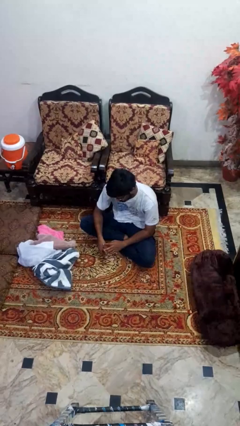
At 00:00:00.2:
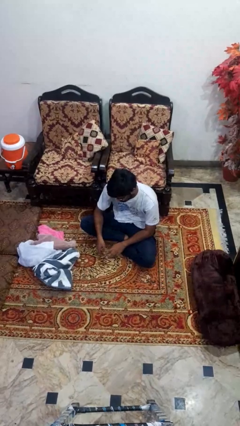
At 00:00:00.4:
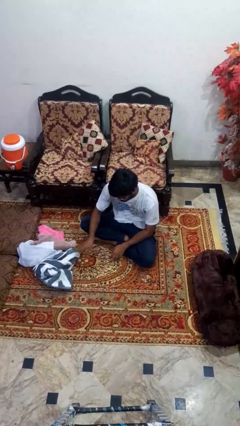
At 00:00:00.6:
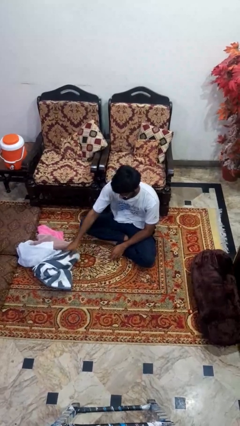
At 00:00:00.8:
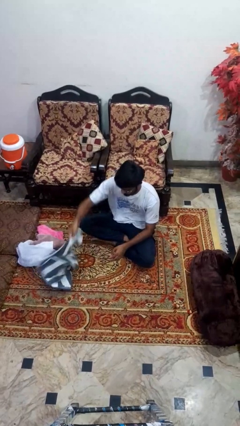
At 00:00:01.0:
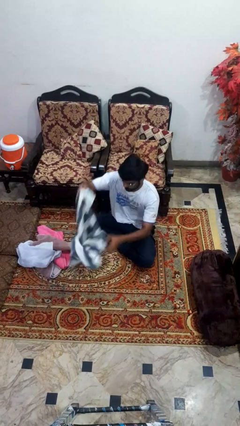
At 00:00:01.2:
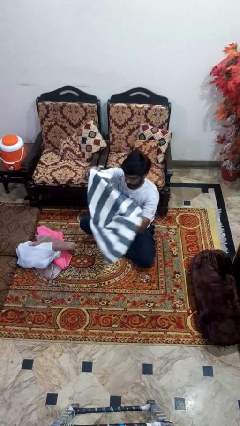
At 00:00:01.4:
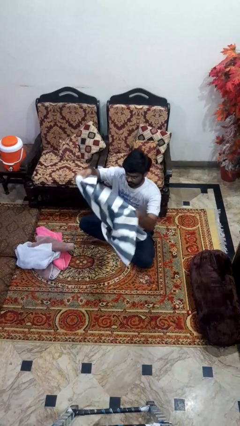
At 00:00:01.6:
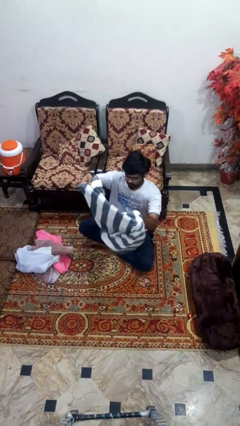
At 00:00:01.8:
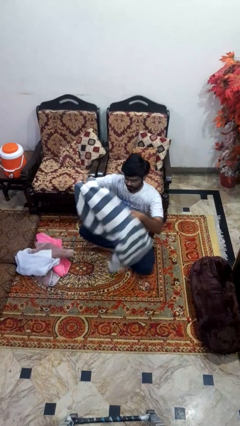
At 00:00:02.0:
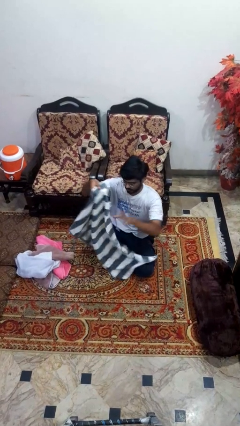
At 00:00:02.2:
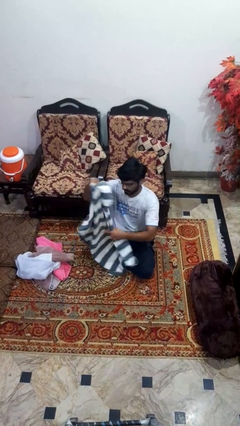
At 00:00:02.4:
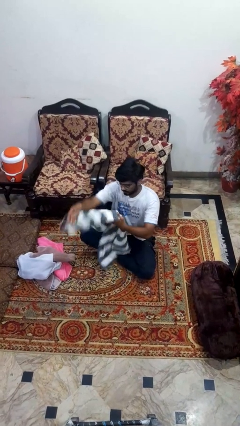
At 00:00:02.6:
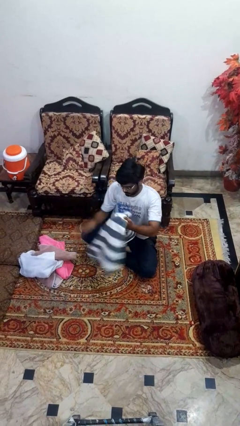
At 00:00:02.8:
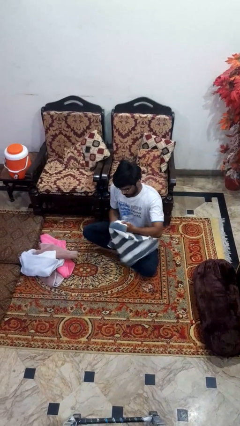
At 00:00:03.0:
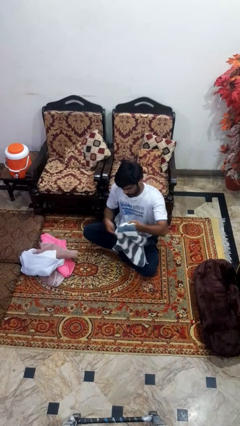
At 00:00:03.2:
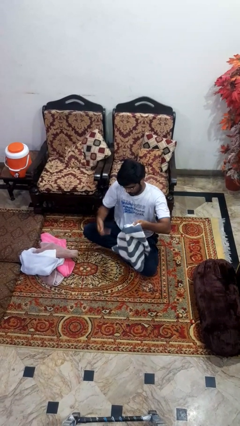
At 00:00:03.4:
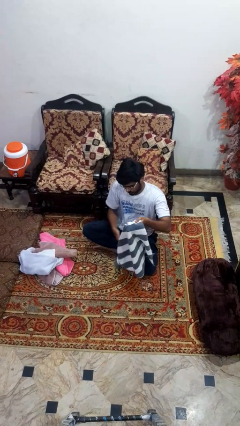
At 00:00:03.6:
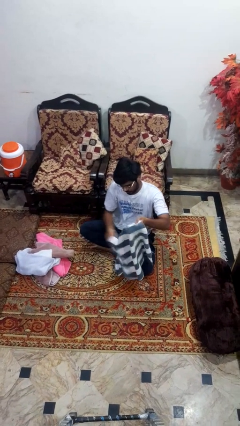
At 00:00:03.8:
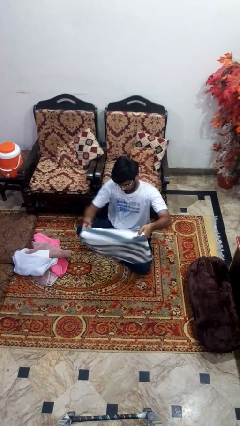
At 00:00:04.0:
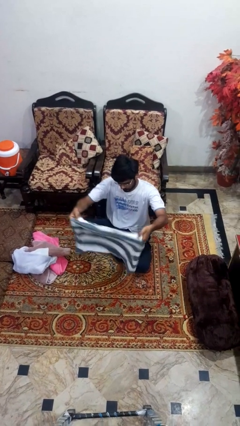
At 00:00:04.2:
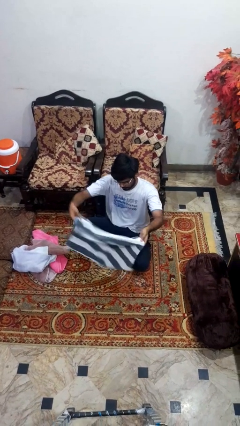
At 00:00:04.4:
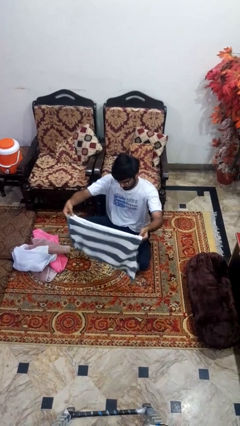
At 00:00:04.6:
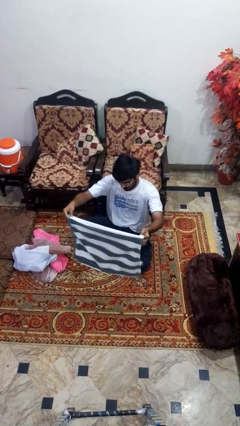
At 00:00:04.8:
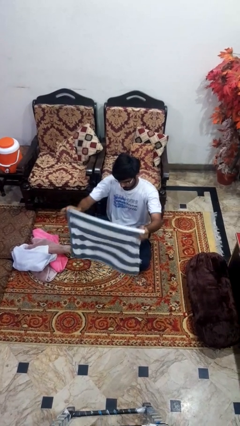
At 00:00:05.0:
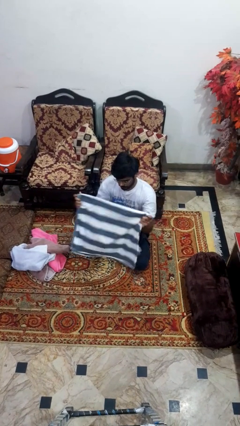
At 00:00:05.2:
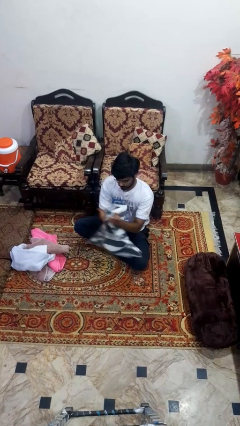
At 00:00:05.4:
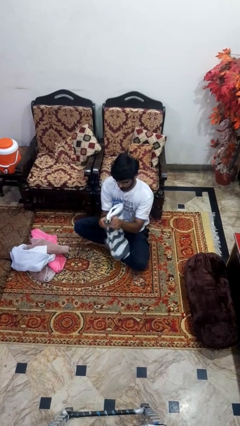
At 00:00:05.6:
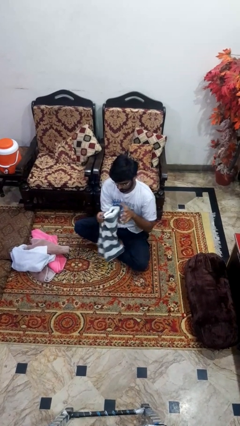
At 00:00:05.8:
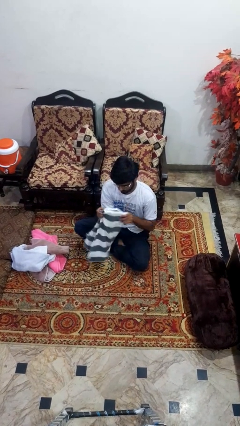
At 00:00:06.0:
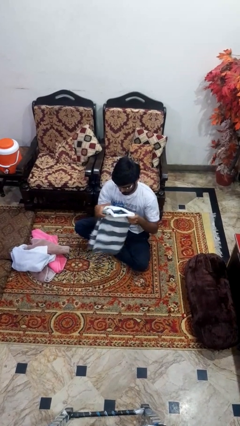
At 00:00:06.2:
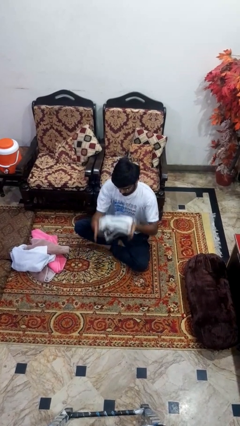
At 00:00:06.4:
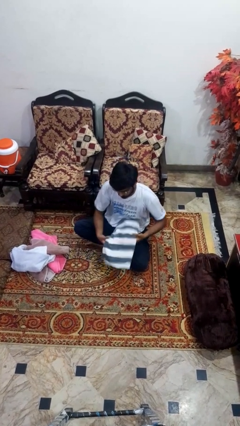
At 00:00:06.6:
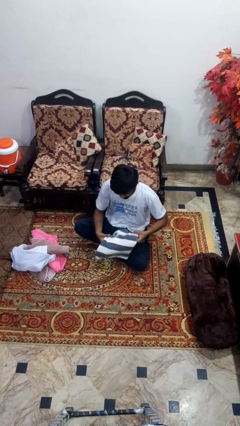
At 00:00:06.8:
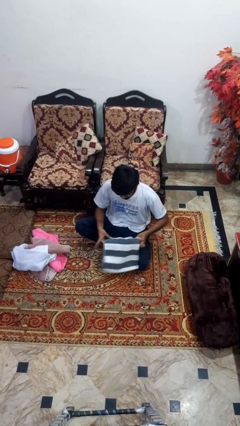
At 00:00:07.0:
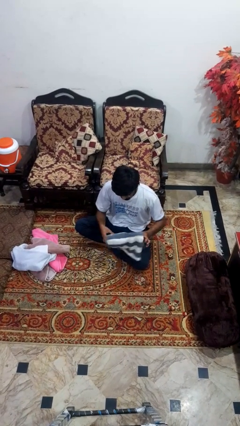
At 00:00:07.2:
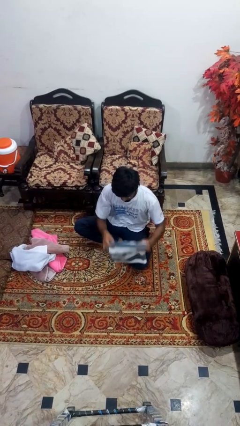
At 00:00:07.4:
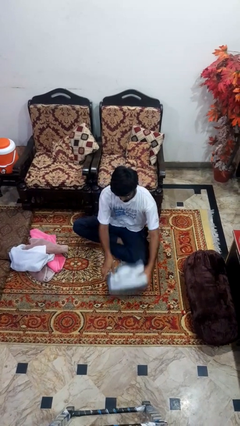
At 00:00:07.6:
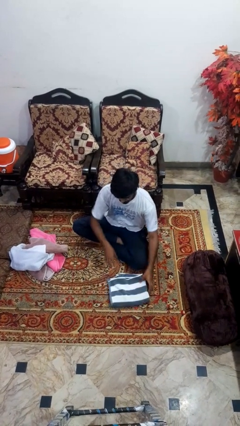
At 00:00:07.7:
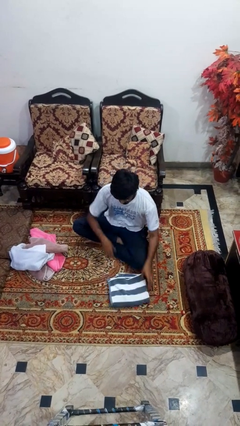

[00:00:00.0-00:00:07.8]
person folds towel

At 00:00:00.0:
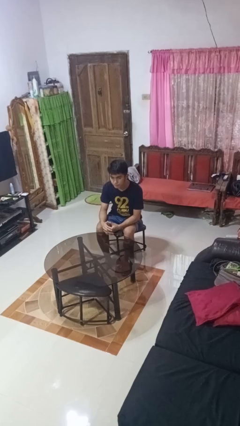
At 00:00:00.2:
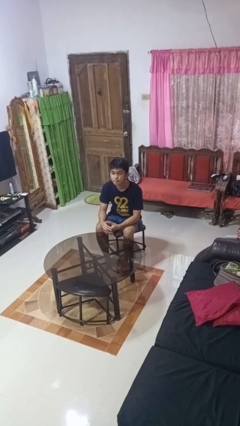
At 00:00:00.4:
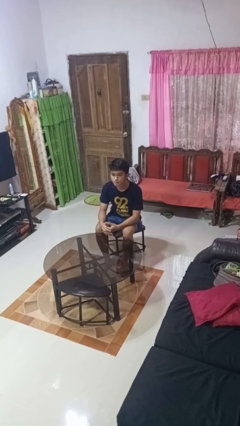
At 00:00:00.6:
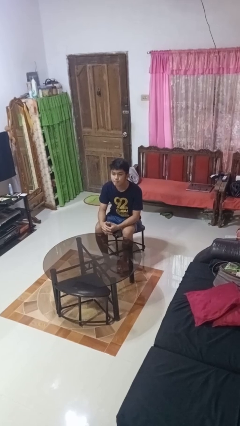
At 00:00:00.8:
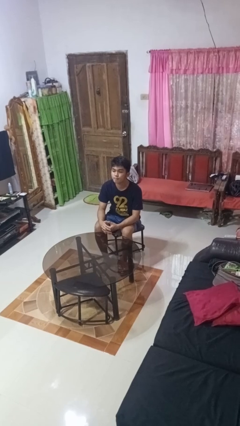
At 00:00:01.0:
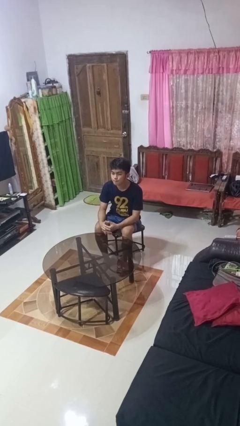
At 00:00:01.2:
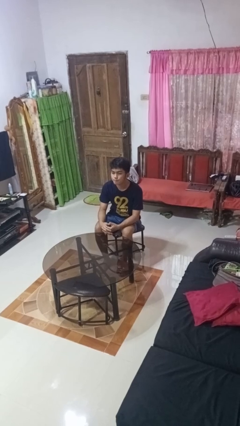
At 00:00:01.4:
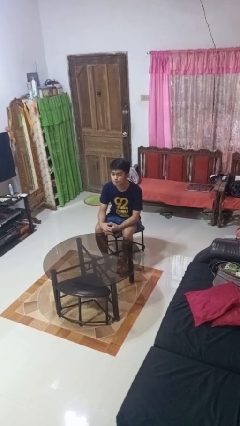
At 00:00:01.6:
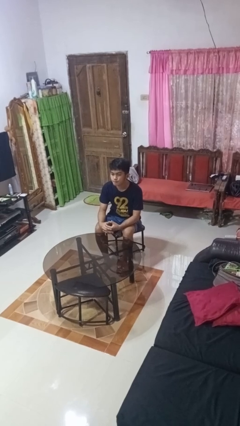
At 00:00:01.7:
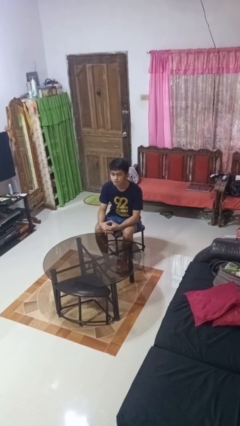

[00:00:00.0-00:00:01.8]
person nods head

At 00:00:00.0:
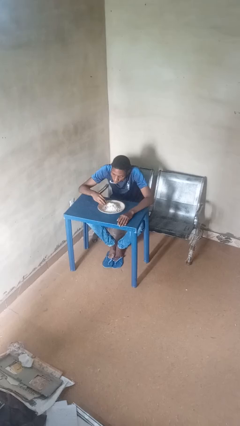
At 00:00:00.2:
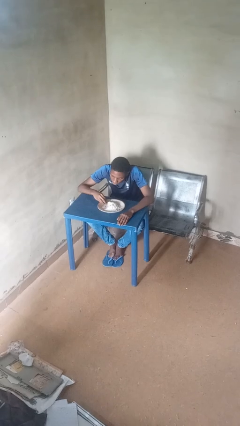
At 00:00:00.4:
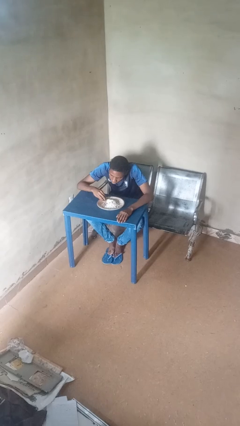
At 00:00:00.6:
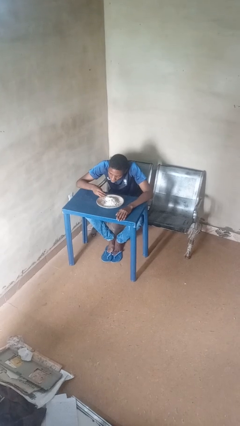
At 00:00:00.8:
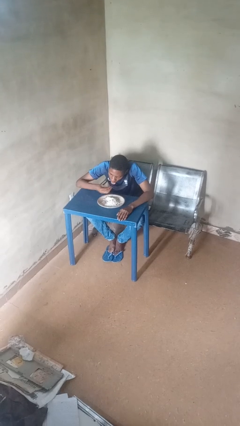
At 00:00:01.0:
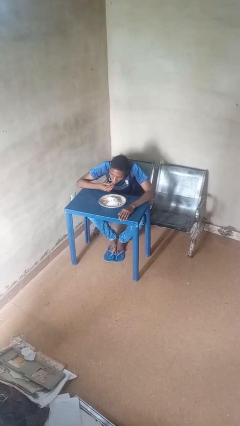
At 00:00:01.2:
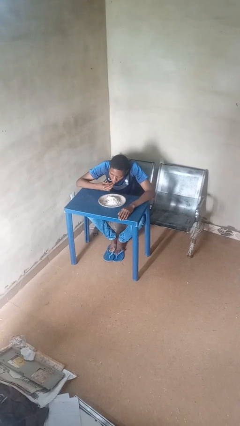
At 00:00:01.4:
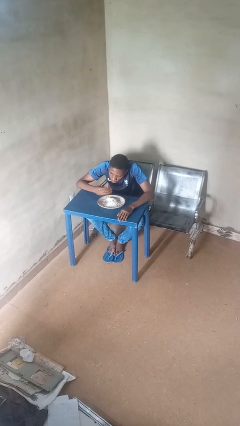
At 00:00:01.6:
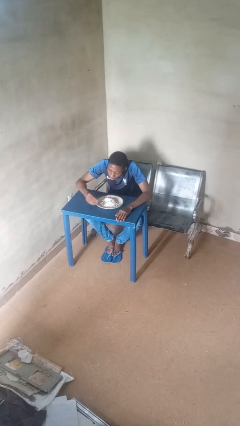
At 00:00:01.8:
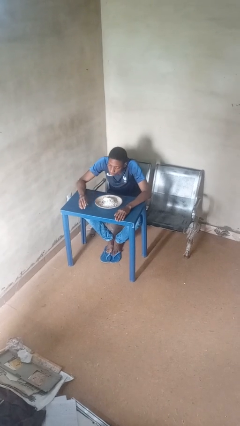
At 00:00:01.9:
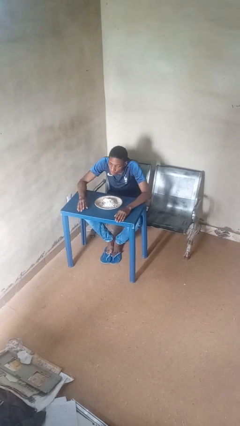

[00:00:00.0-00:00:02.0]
person eats with hands

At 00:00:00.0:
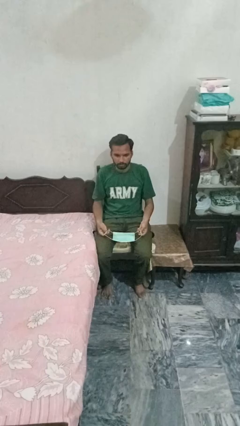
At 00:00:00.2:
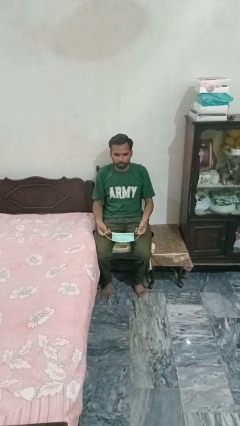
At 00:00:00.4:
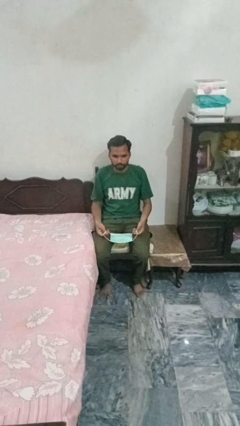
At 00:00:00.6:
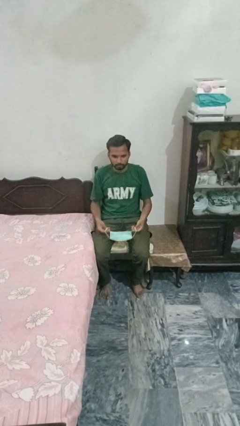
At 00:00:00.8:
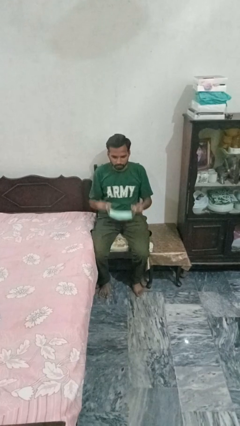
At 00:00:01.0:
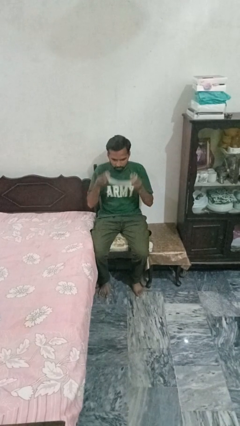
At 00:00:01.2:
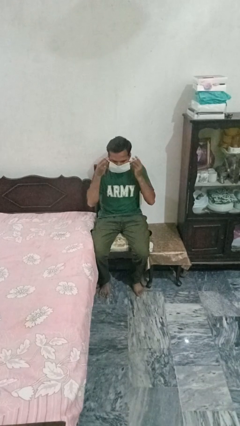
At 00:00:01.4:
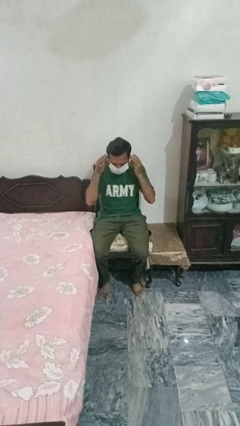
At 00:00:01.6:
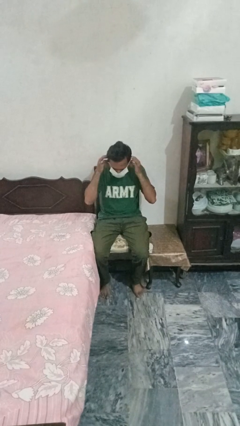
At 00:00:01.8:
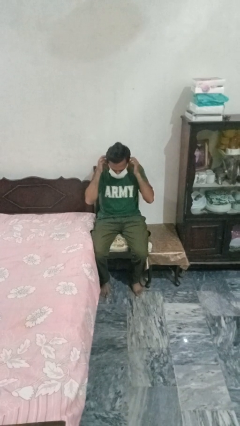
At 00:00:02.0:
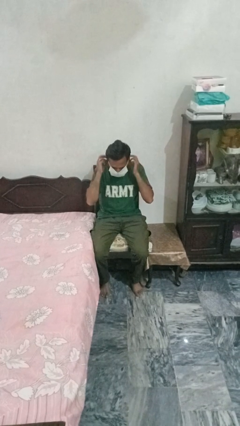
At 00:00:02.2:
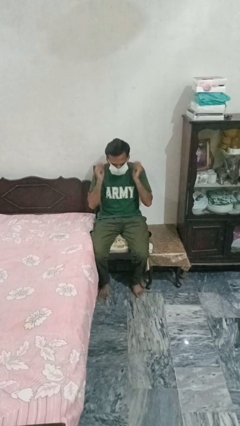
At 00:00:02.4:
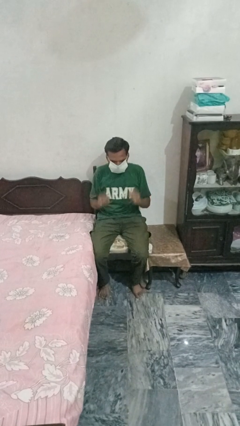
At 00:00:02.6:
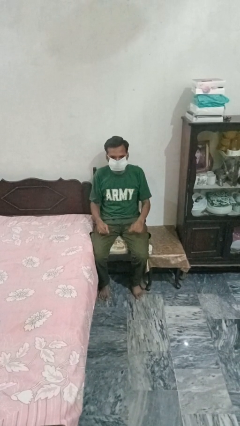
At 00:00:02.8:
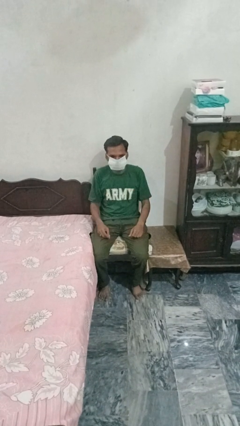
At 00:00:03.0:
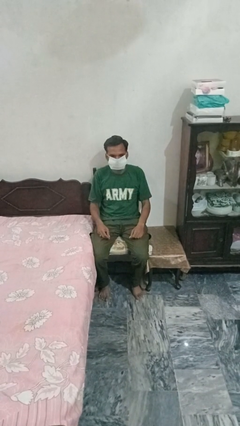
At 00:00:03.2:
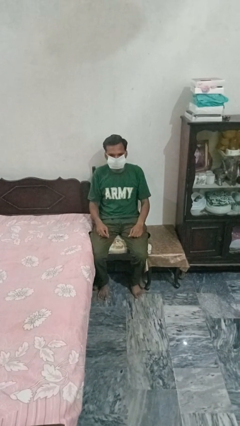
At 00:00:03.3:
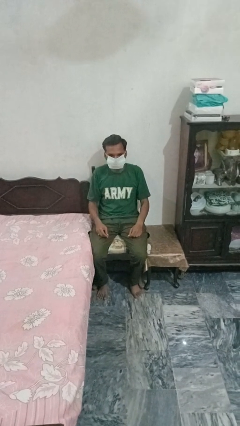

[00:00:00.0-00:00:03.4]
person puts on facemask

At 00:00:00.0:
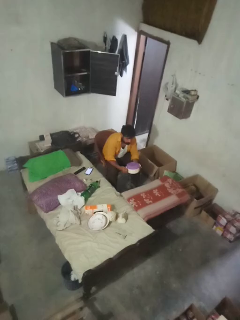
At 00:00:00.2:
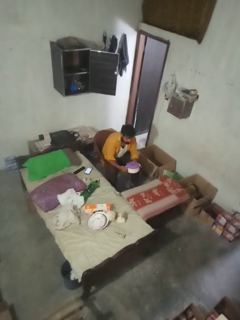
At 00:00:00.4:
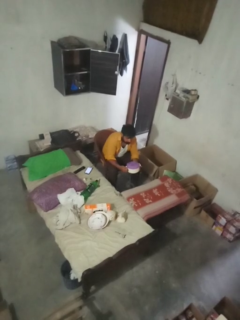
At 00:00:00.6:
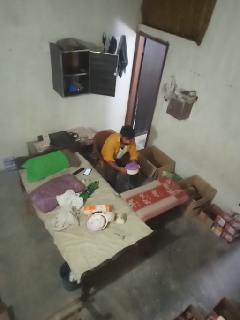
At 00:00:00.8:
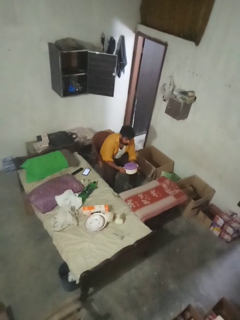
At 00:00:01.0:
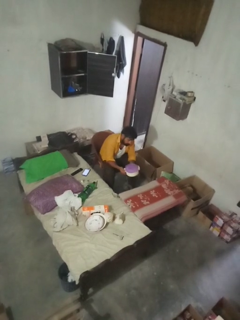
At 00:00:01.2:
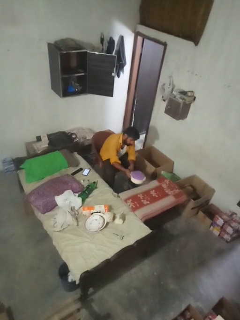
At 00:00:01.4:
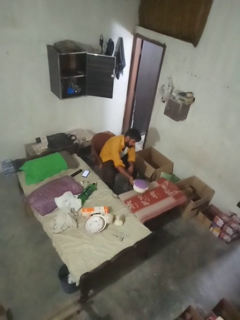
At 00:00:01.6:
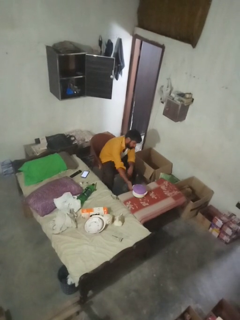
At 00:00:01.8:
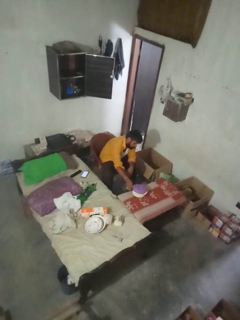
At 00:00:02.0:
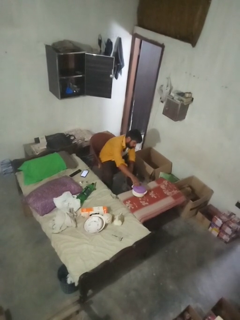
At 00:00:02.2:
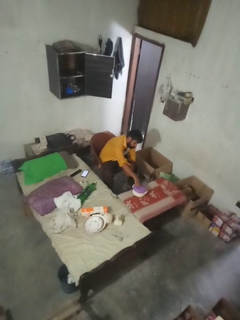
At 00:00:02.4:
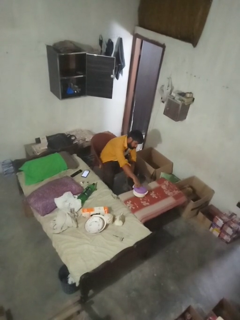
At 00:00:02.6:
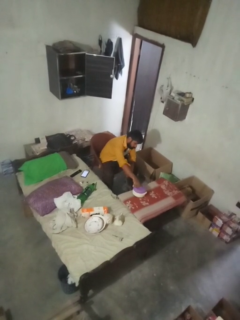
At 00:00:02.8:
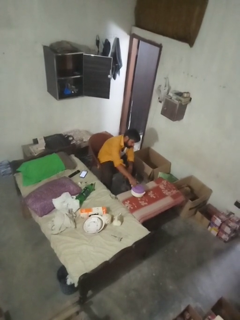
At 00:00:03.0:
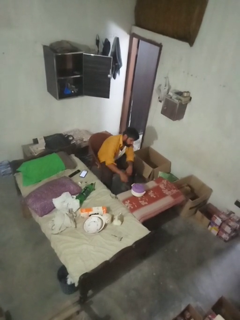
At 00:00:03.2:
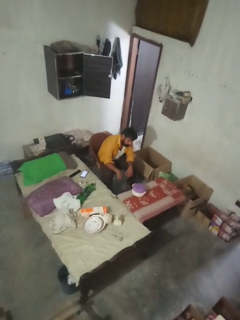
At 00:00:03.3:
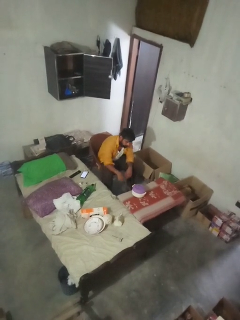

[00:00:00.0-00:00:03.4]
person takes off apron

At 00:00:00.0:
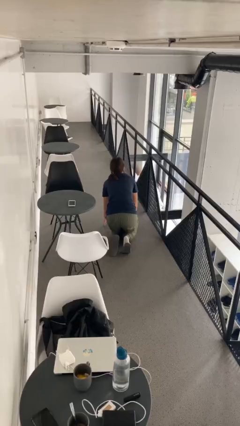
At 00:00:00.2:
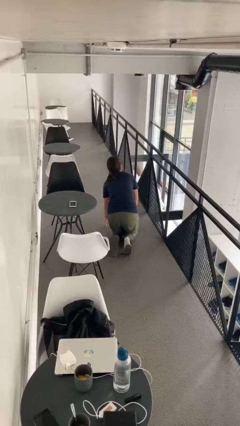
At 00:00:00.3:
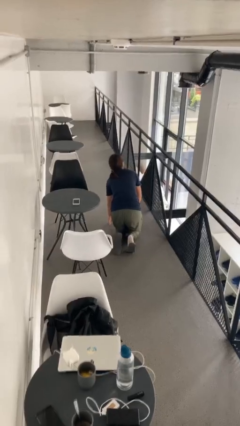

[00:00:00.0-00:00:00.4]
person sits down
